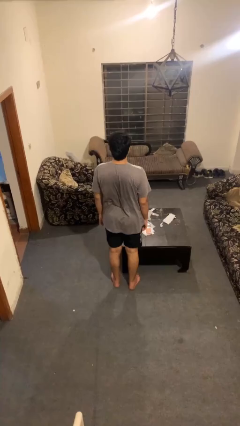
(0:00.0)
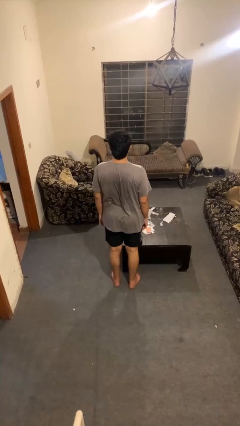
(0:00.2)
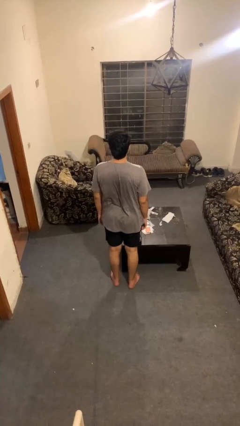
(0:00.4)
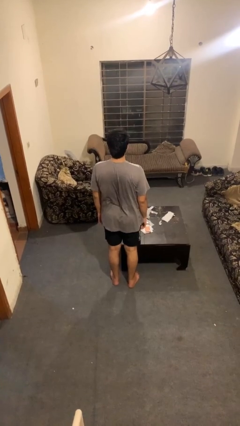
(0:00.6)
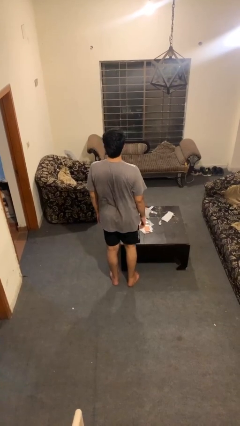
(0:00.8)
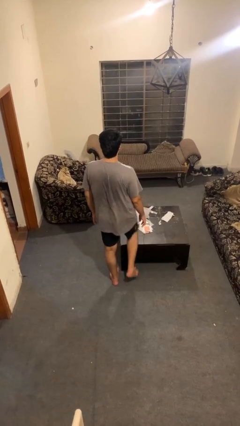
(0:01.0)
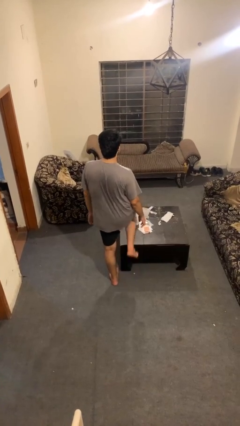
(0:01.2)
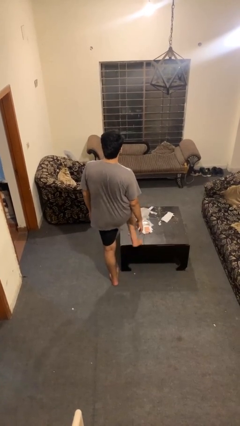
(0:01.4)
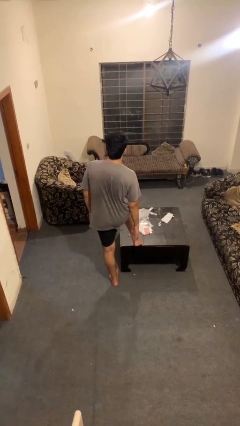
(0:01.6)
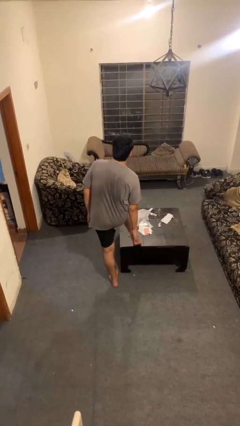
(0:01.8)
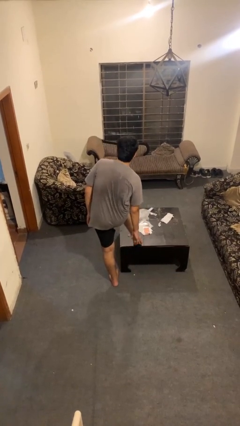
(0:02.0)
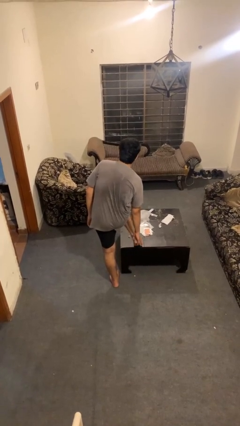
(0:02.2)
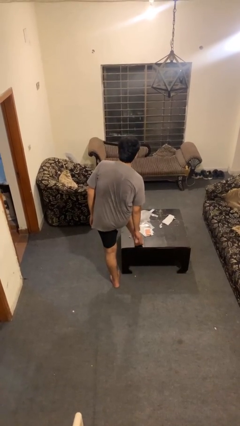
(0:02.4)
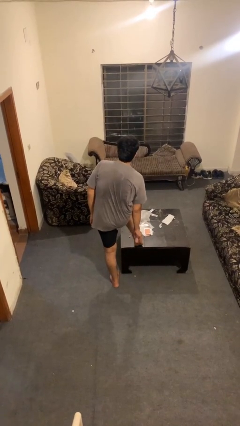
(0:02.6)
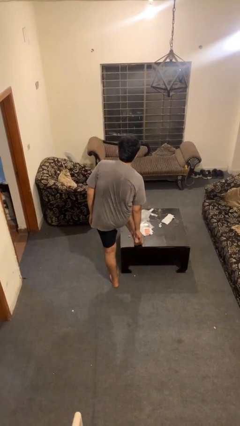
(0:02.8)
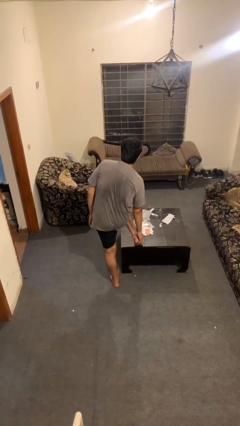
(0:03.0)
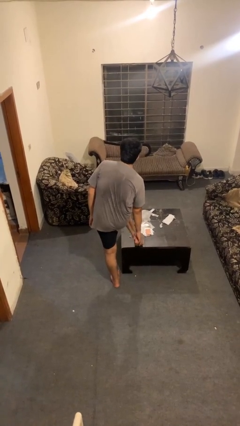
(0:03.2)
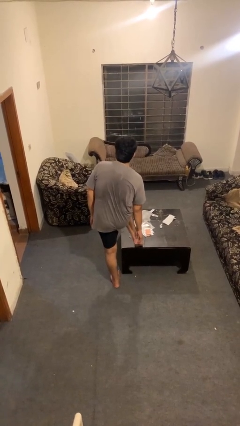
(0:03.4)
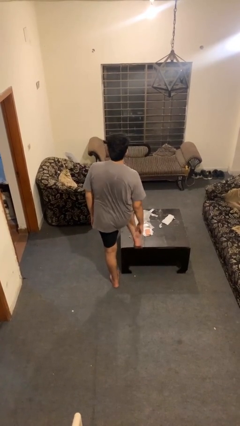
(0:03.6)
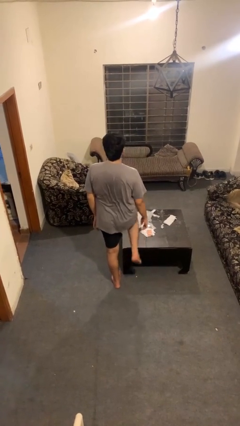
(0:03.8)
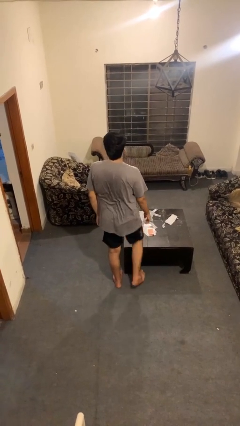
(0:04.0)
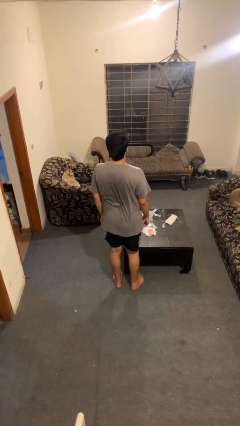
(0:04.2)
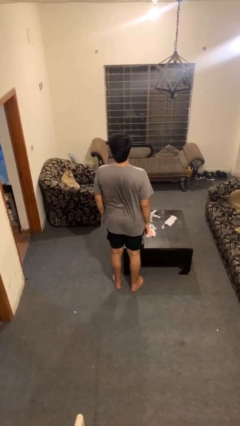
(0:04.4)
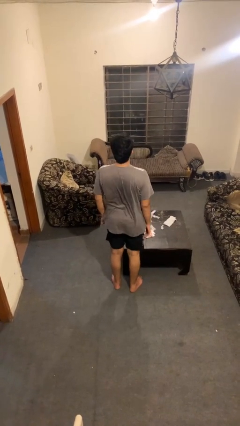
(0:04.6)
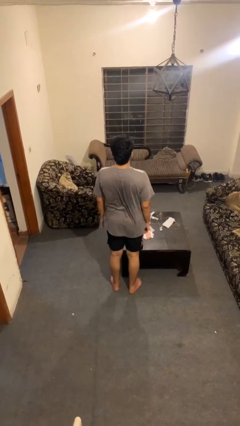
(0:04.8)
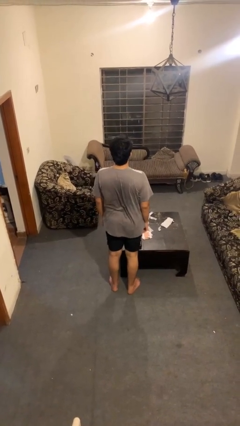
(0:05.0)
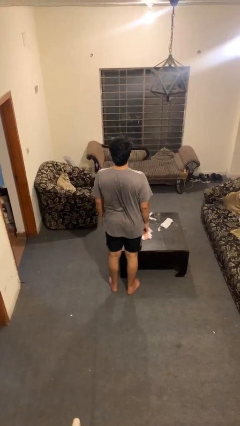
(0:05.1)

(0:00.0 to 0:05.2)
person rubs foot

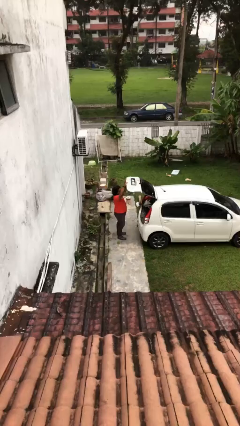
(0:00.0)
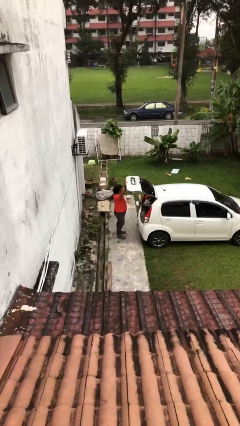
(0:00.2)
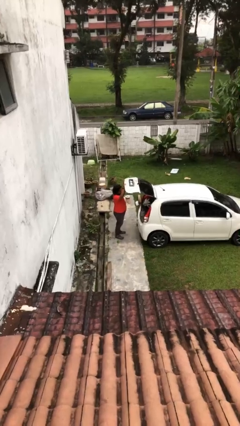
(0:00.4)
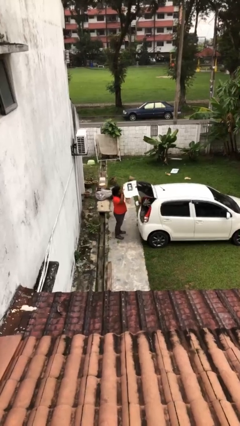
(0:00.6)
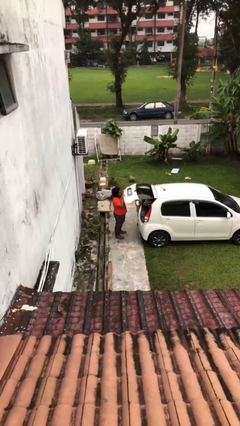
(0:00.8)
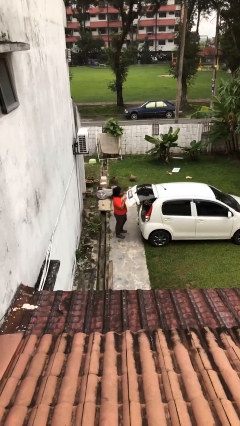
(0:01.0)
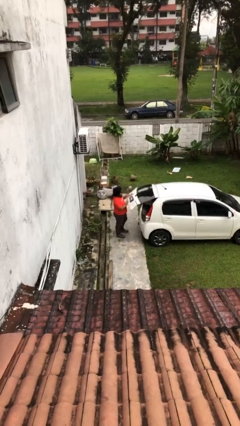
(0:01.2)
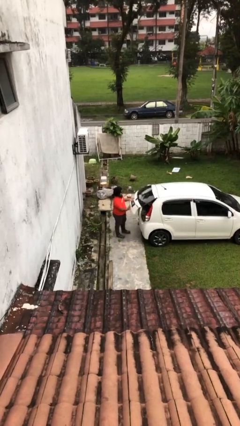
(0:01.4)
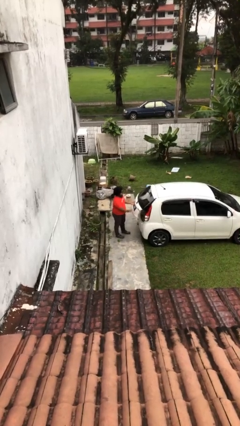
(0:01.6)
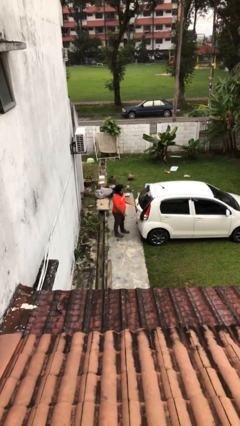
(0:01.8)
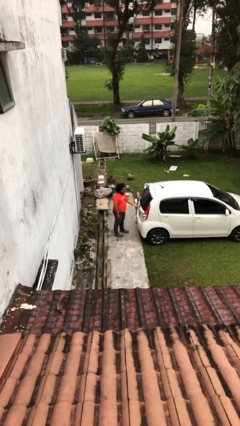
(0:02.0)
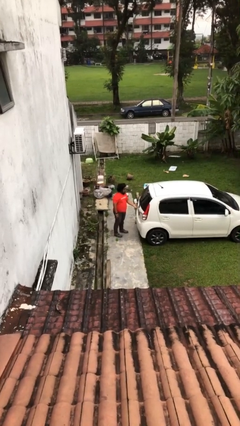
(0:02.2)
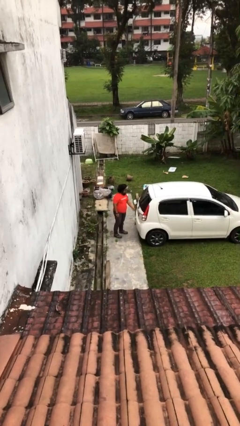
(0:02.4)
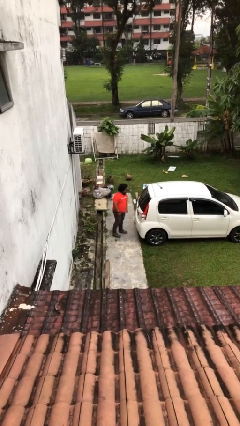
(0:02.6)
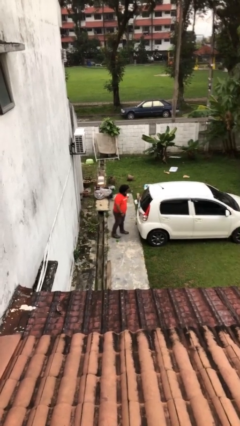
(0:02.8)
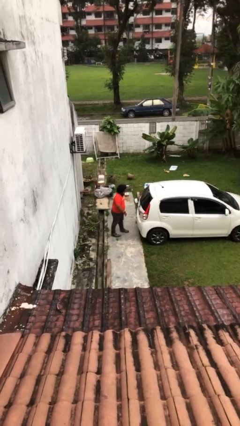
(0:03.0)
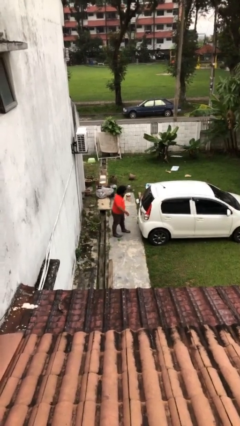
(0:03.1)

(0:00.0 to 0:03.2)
person closes car trunk

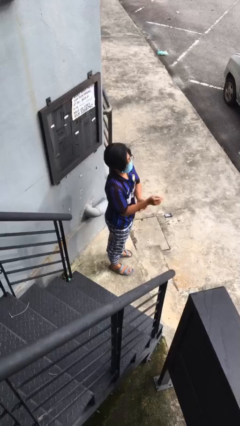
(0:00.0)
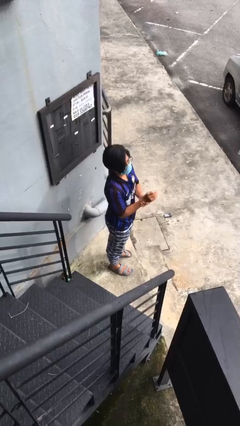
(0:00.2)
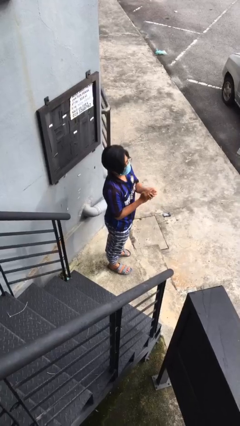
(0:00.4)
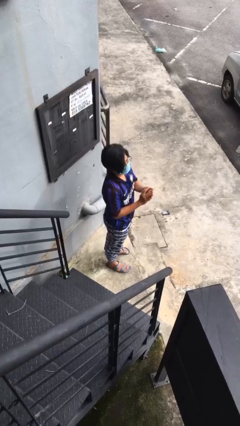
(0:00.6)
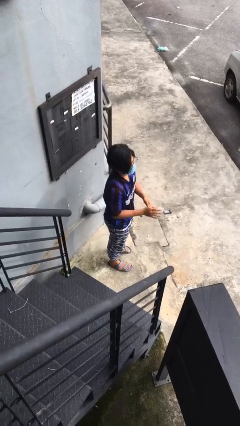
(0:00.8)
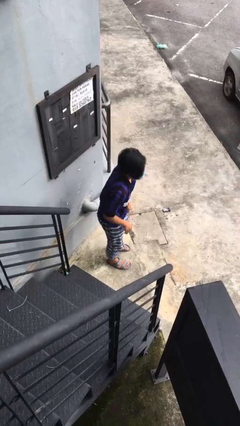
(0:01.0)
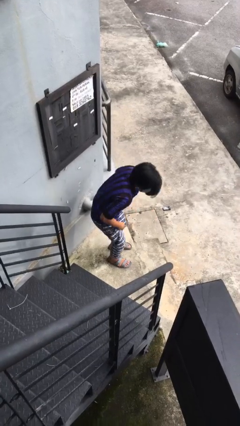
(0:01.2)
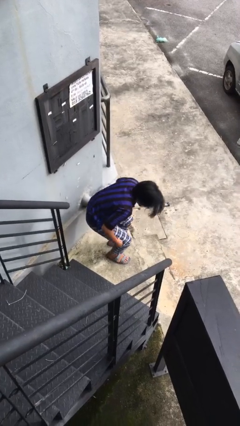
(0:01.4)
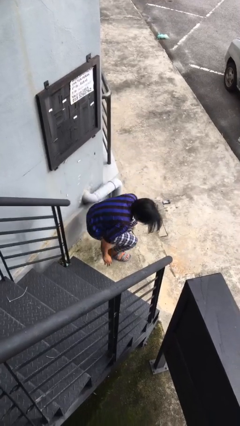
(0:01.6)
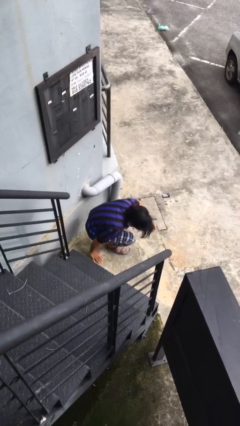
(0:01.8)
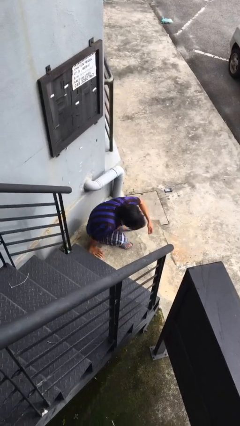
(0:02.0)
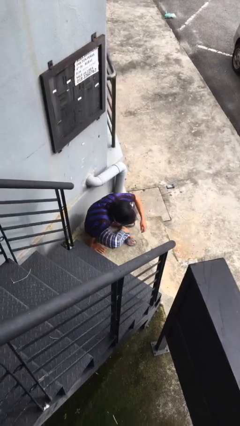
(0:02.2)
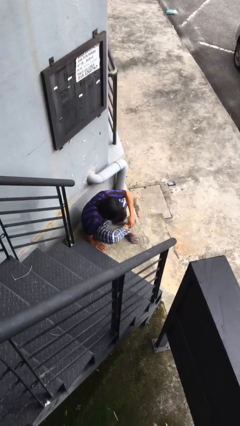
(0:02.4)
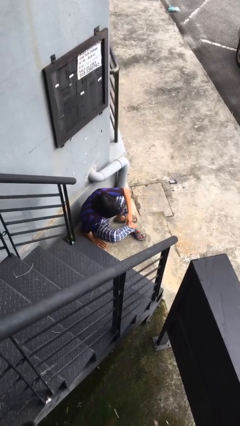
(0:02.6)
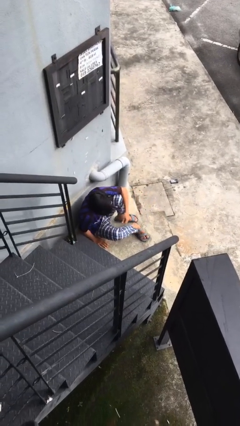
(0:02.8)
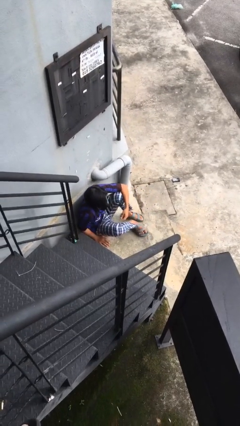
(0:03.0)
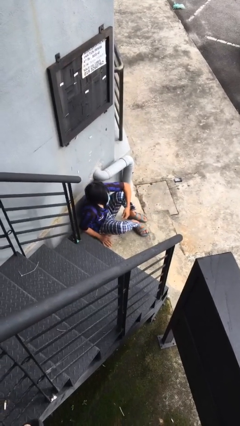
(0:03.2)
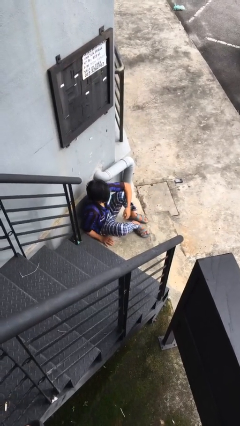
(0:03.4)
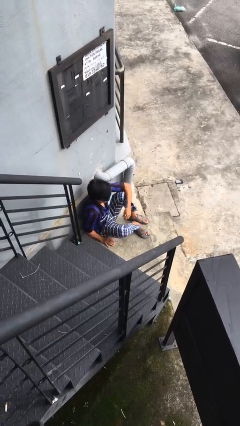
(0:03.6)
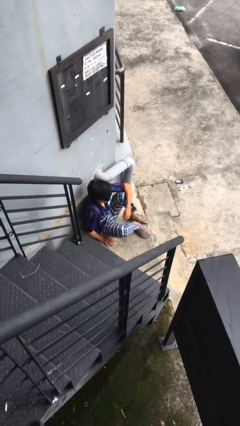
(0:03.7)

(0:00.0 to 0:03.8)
person sits down

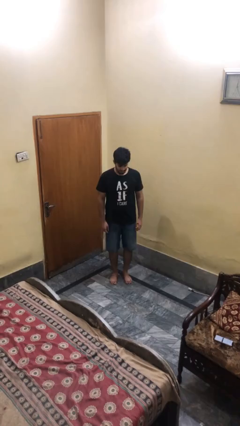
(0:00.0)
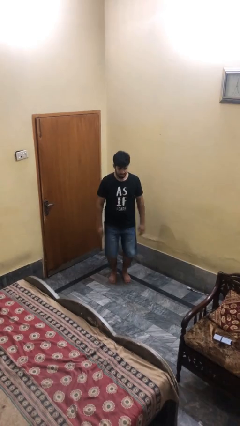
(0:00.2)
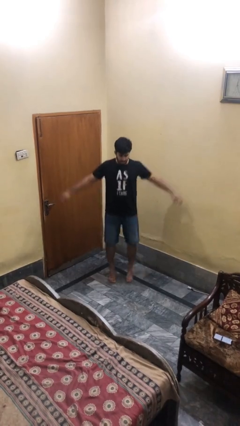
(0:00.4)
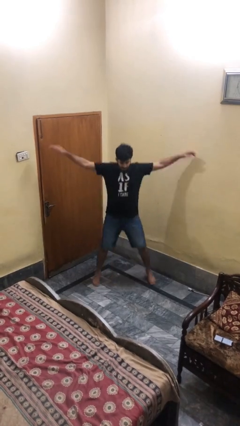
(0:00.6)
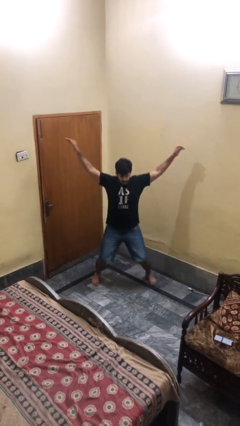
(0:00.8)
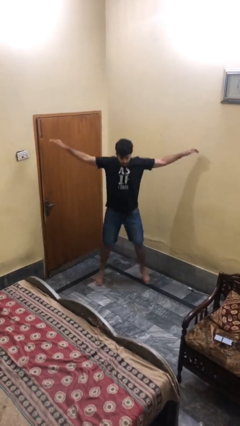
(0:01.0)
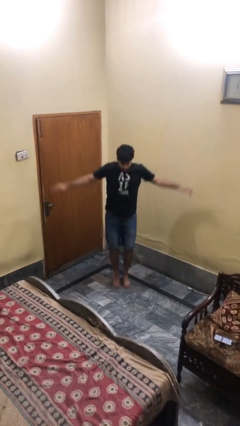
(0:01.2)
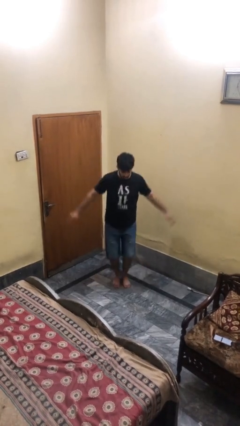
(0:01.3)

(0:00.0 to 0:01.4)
person exercises with jumping jacks

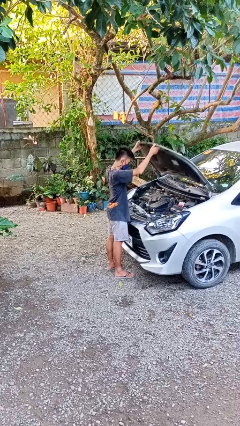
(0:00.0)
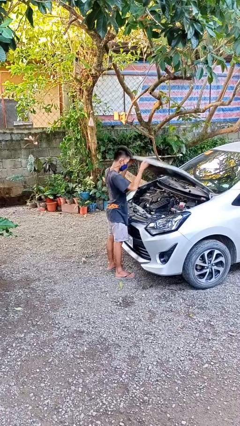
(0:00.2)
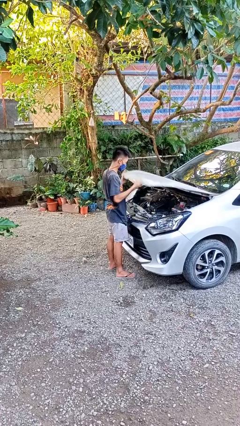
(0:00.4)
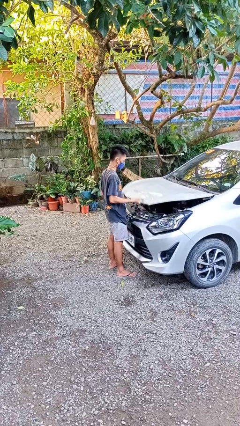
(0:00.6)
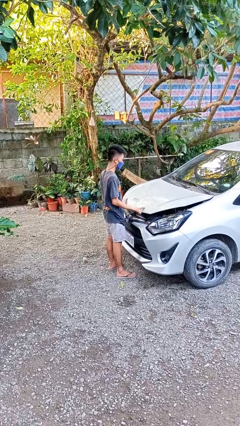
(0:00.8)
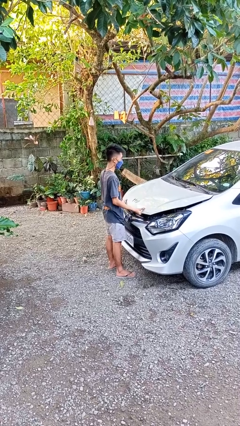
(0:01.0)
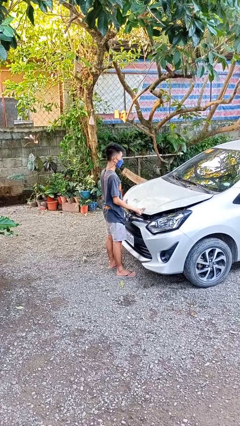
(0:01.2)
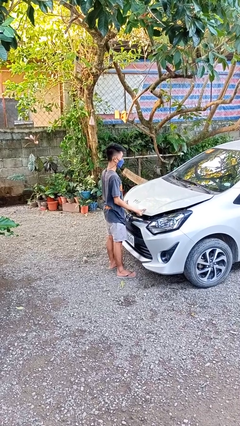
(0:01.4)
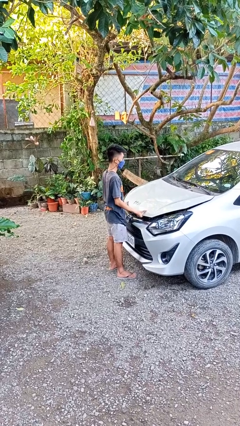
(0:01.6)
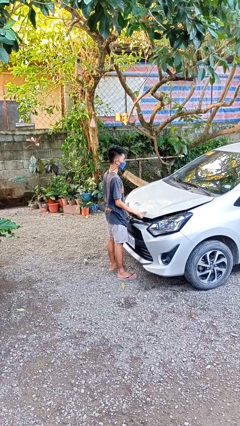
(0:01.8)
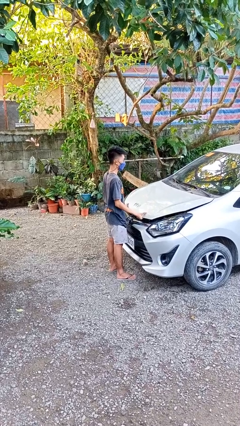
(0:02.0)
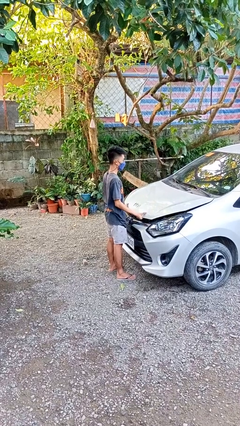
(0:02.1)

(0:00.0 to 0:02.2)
person closes car hood

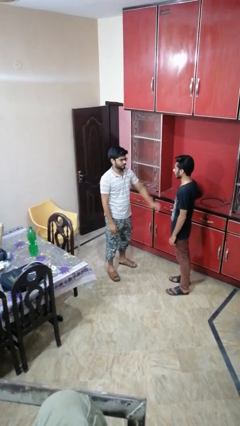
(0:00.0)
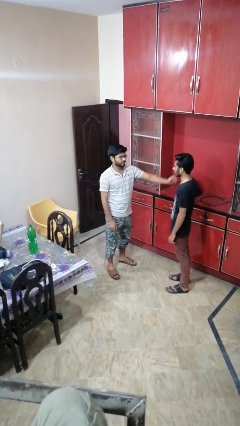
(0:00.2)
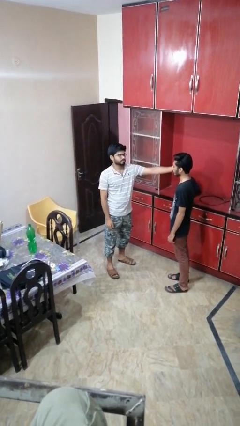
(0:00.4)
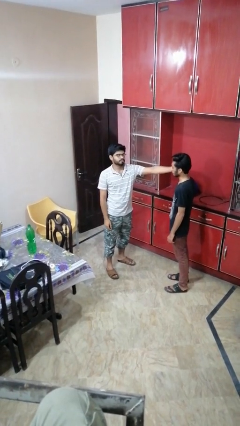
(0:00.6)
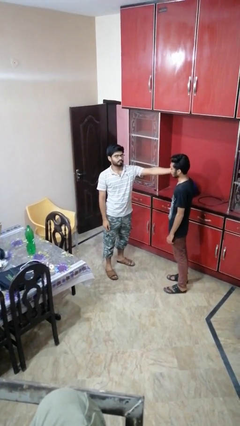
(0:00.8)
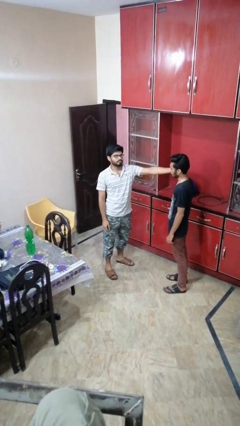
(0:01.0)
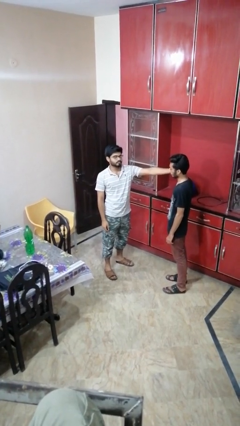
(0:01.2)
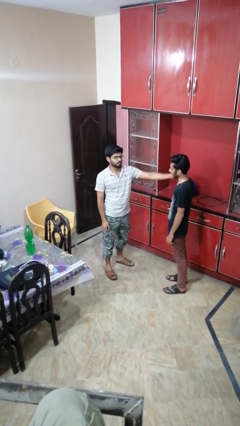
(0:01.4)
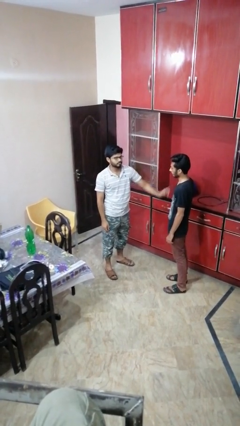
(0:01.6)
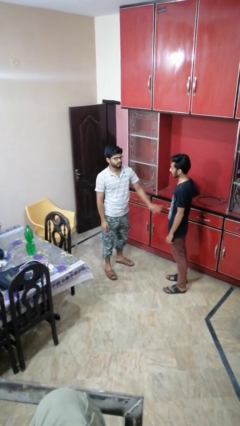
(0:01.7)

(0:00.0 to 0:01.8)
person touches face of person
